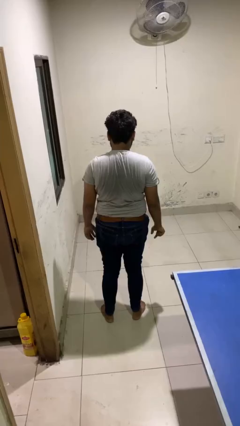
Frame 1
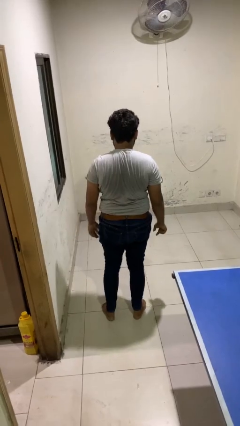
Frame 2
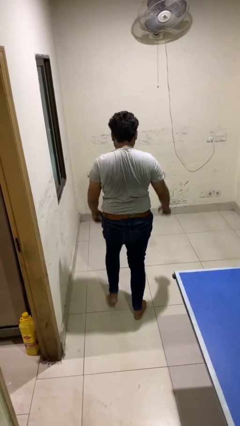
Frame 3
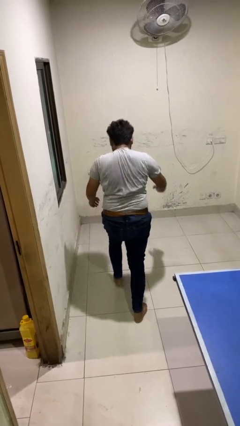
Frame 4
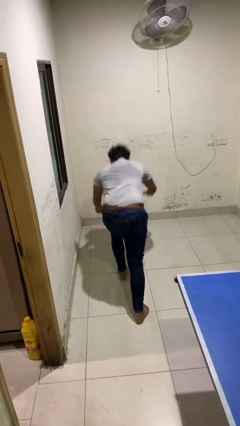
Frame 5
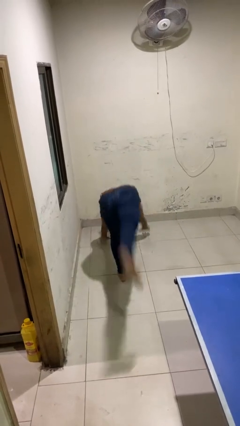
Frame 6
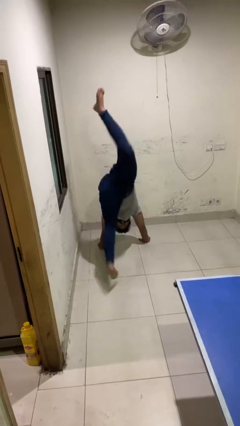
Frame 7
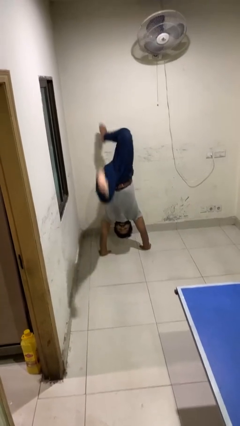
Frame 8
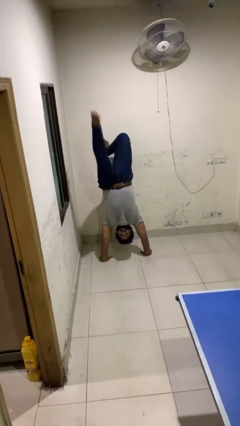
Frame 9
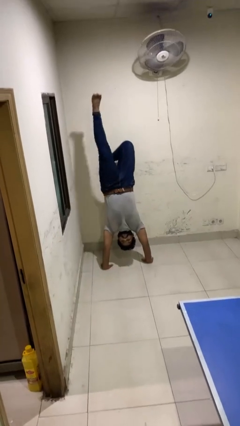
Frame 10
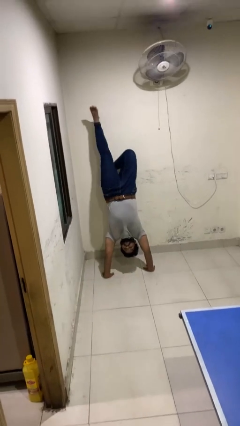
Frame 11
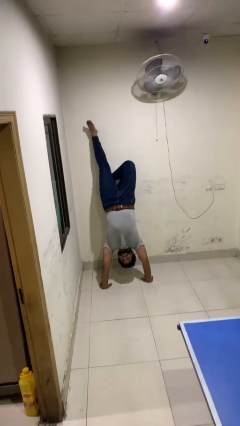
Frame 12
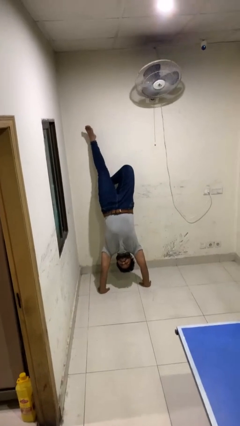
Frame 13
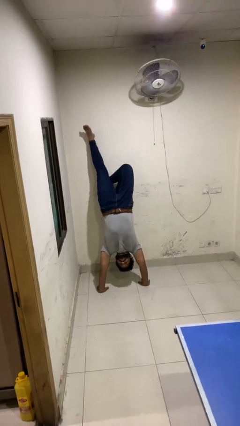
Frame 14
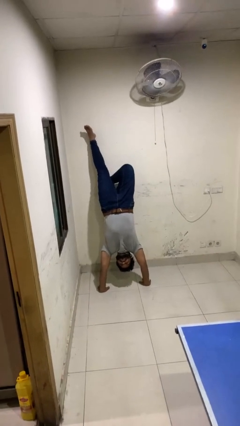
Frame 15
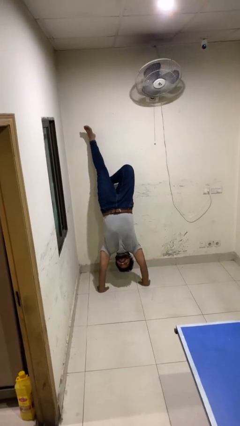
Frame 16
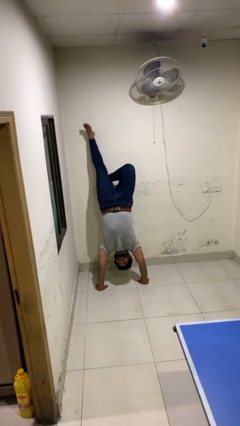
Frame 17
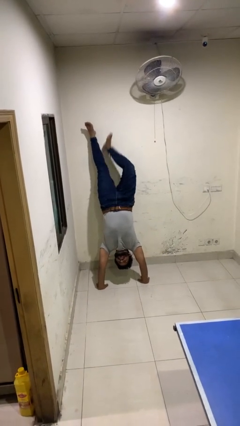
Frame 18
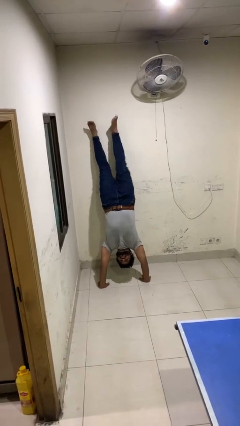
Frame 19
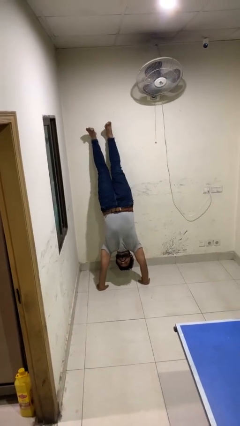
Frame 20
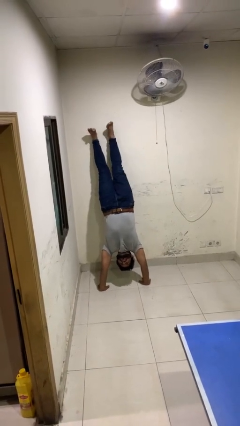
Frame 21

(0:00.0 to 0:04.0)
person handstand

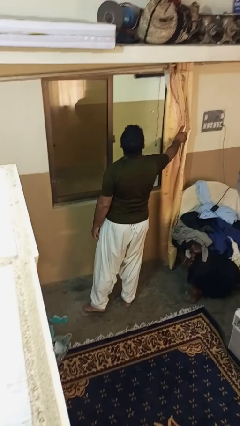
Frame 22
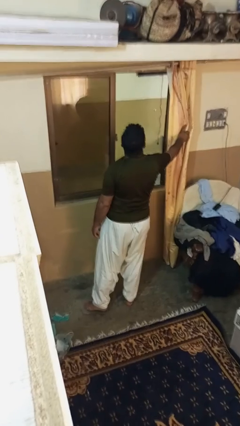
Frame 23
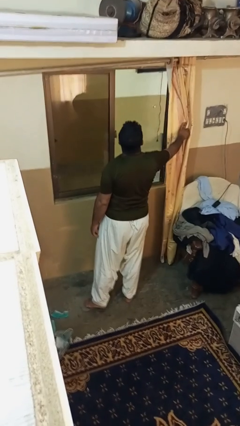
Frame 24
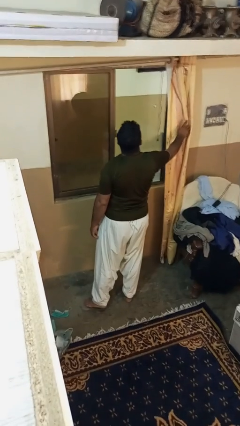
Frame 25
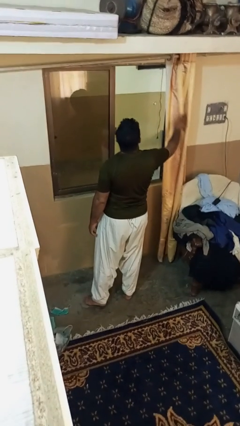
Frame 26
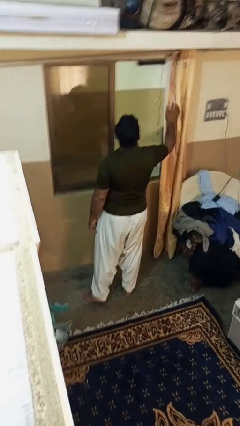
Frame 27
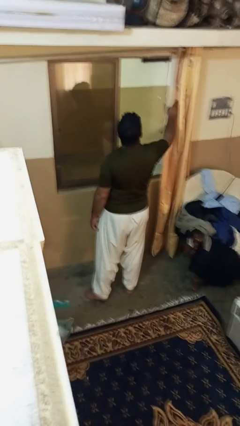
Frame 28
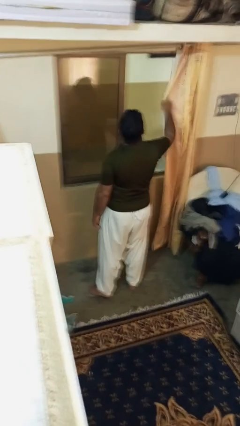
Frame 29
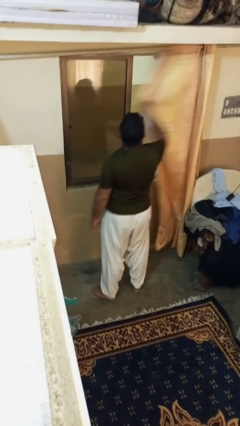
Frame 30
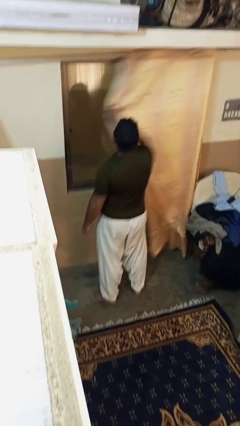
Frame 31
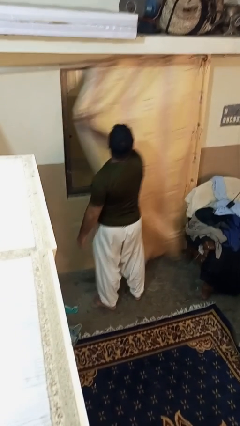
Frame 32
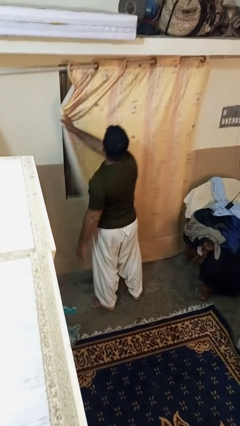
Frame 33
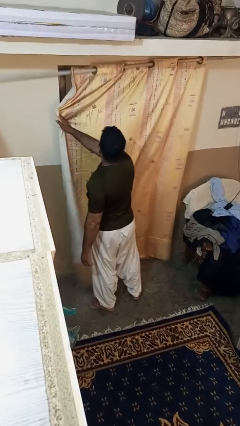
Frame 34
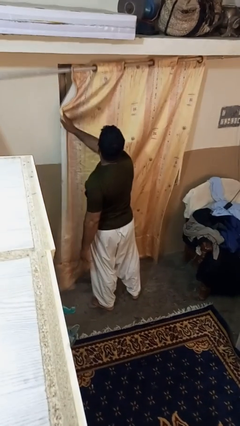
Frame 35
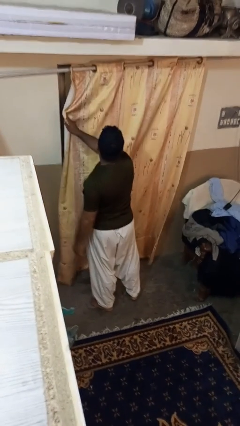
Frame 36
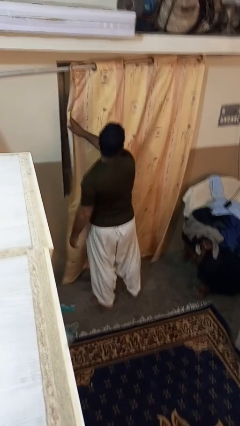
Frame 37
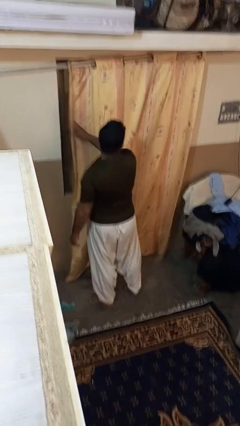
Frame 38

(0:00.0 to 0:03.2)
person closes curtains

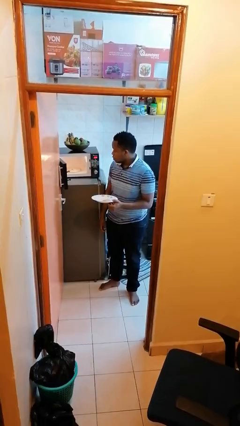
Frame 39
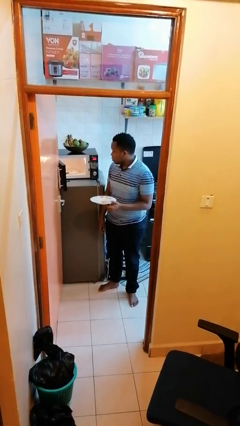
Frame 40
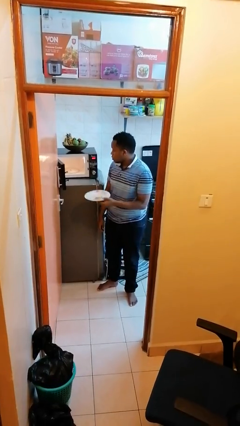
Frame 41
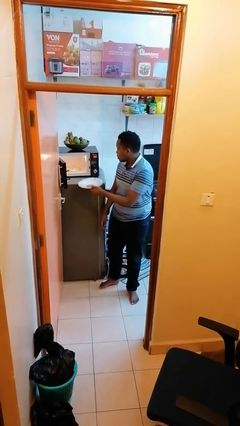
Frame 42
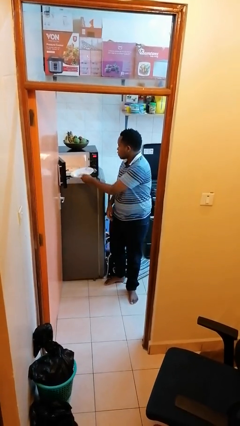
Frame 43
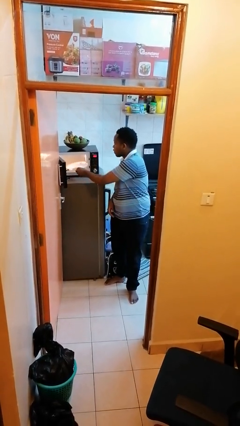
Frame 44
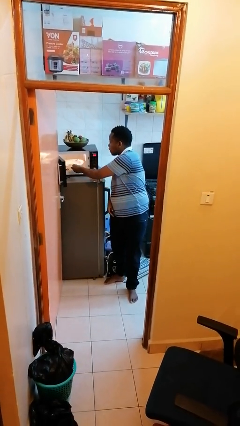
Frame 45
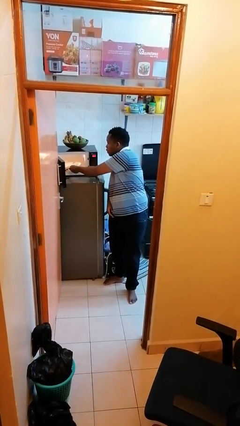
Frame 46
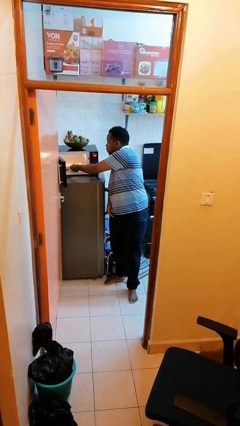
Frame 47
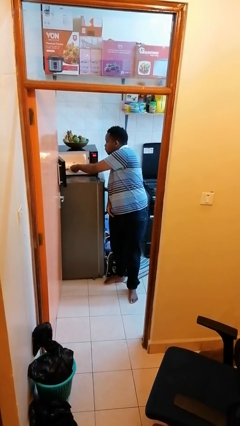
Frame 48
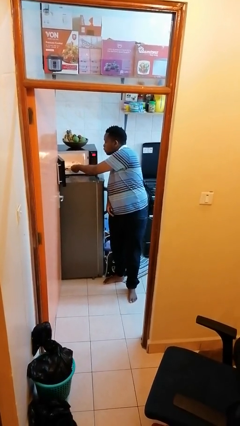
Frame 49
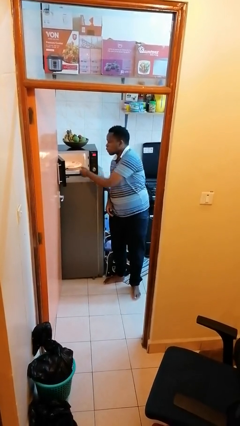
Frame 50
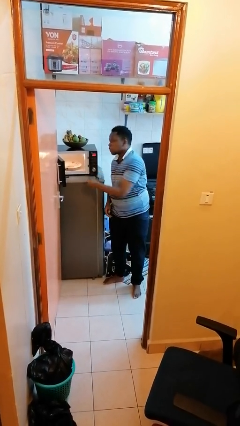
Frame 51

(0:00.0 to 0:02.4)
person puts object into microwave

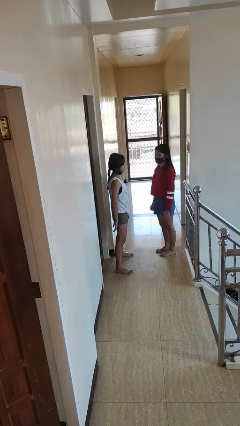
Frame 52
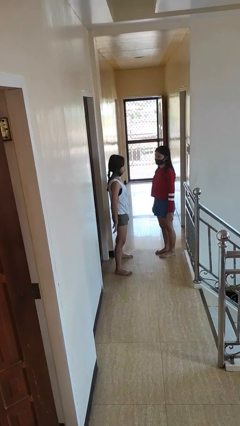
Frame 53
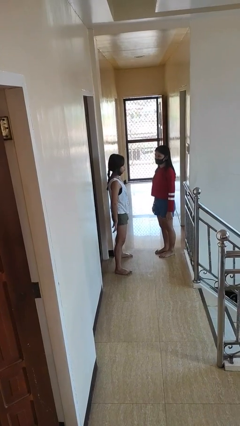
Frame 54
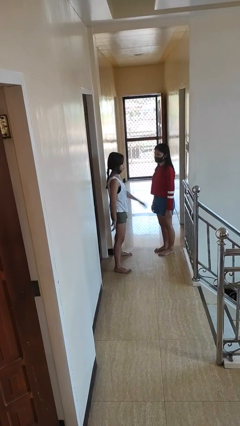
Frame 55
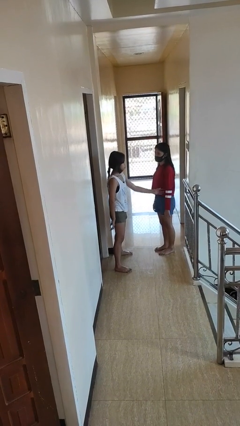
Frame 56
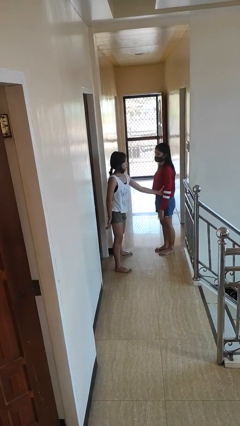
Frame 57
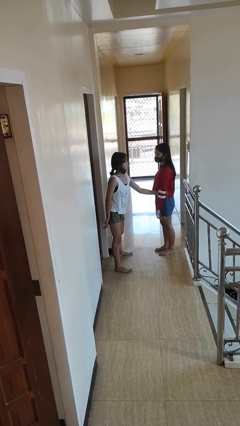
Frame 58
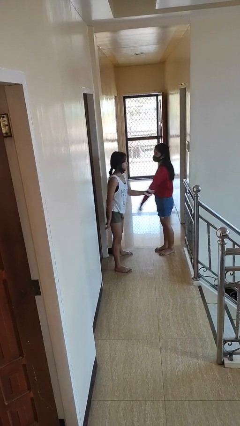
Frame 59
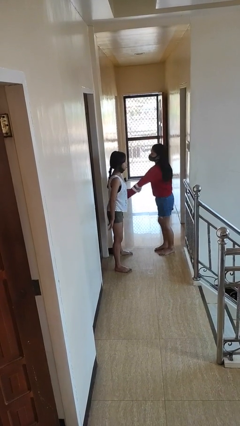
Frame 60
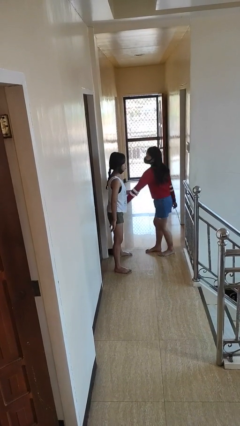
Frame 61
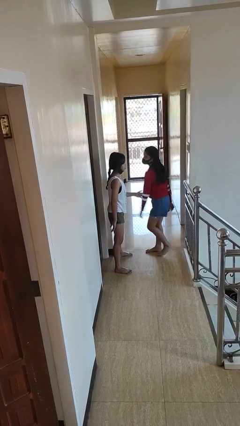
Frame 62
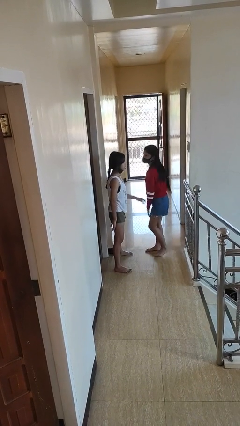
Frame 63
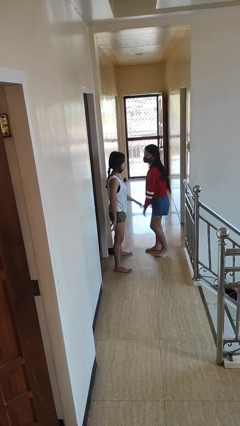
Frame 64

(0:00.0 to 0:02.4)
person grabs person by forearm

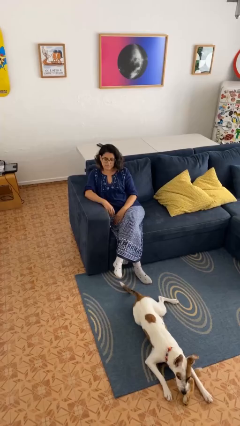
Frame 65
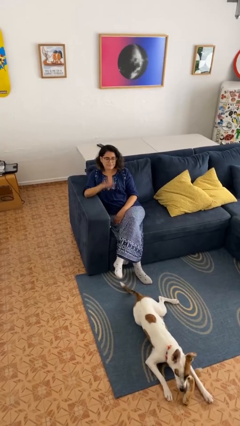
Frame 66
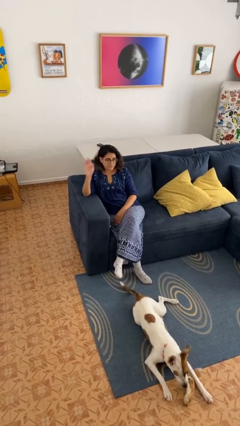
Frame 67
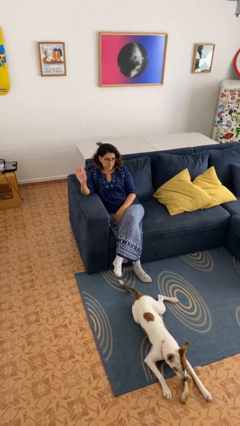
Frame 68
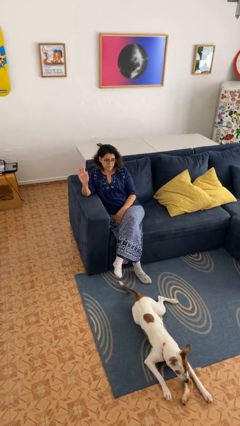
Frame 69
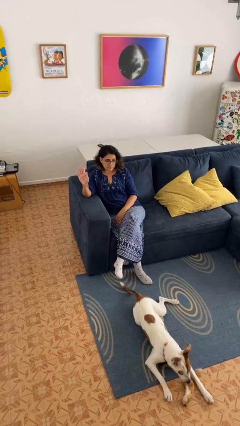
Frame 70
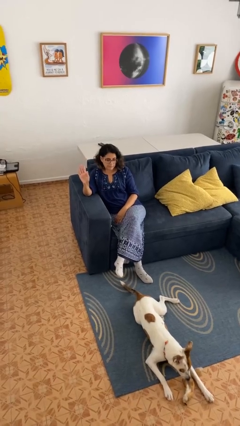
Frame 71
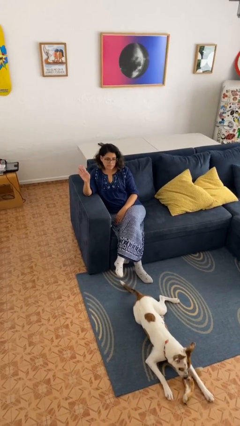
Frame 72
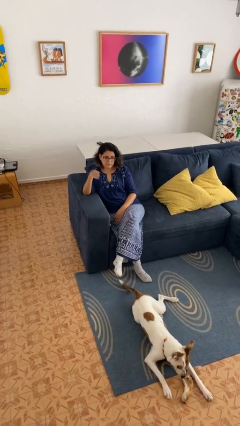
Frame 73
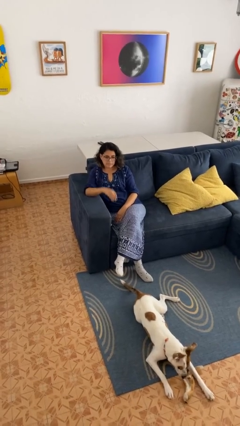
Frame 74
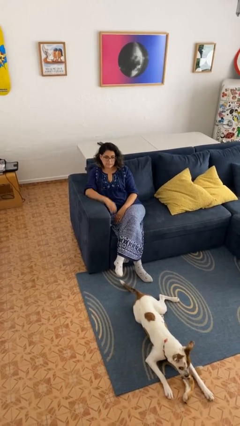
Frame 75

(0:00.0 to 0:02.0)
person gestures stop

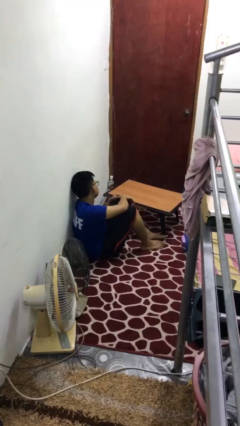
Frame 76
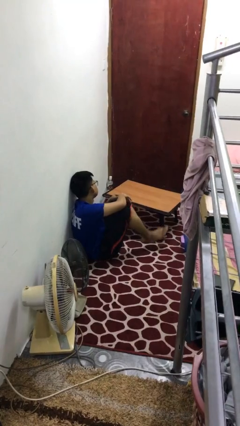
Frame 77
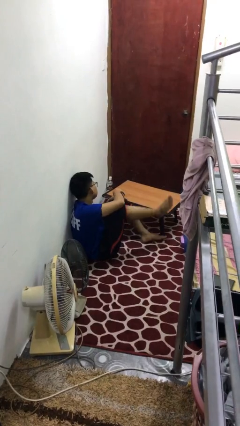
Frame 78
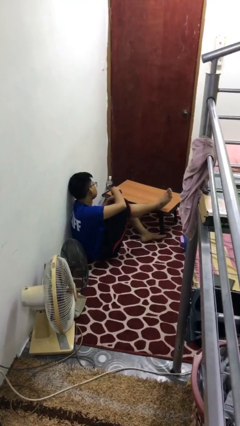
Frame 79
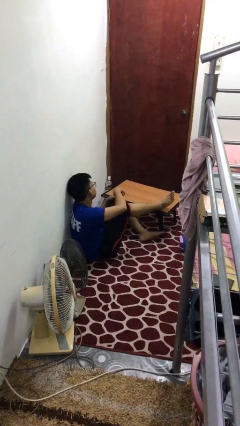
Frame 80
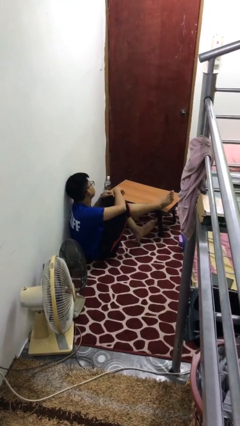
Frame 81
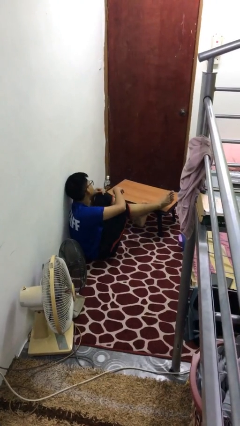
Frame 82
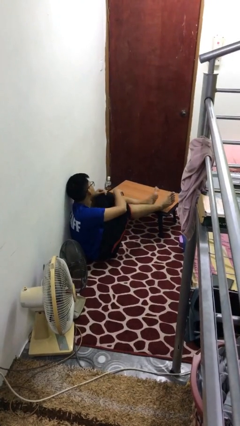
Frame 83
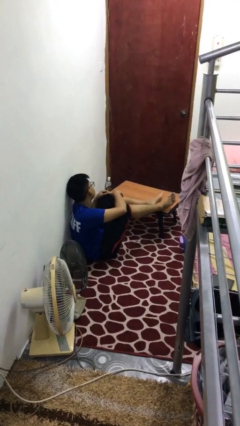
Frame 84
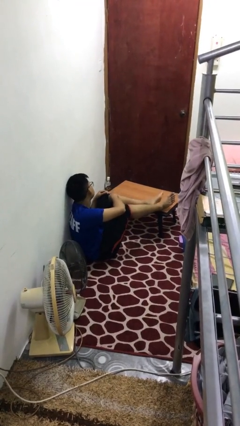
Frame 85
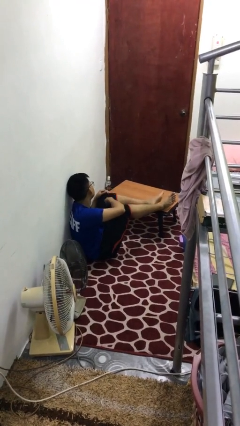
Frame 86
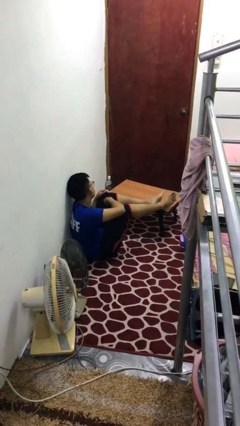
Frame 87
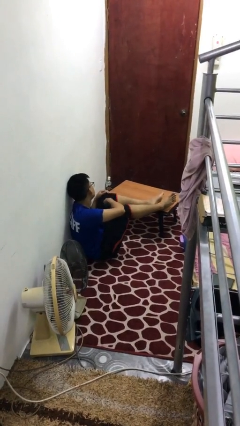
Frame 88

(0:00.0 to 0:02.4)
person puts feet up

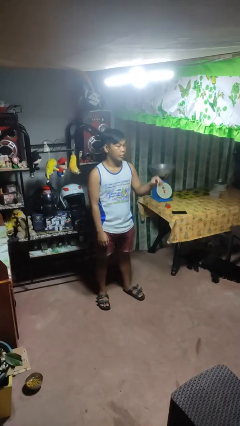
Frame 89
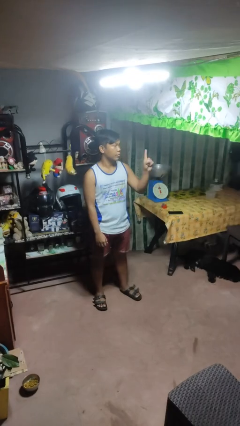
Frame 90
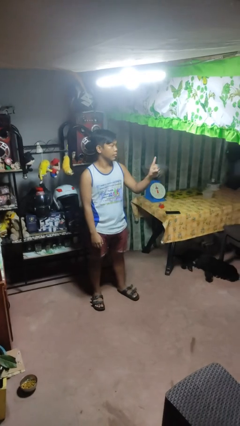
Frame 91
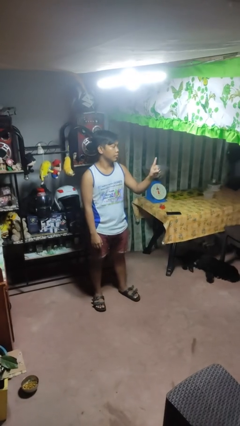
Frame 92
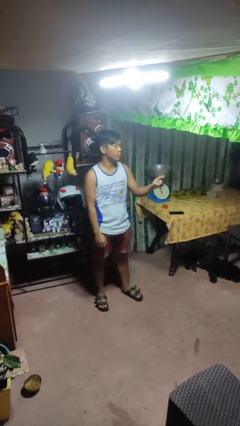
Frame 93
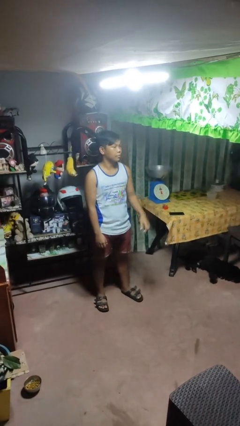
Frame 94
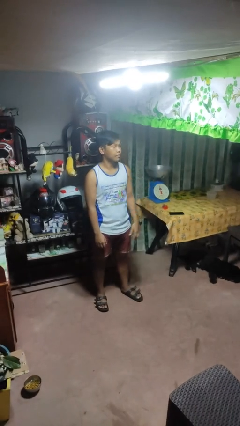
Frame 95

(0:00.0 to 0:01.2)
person gestures number one
